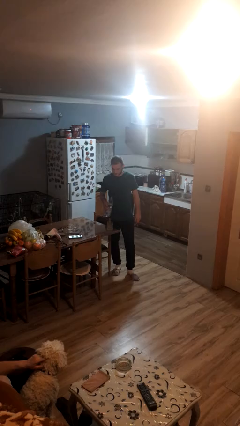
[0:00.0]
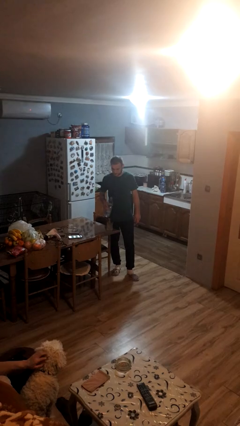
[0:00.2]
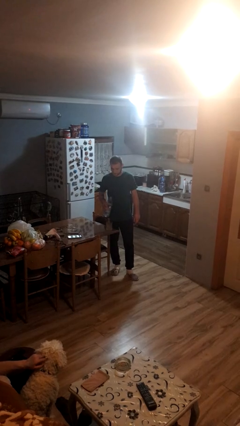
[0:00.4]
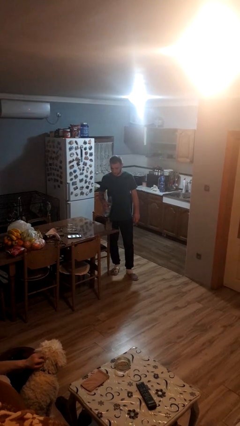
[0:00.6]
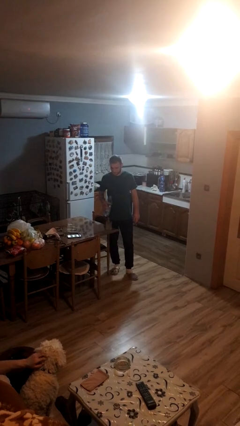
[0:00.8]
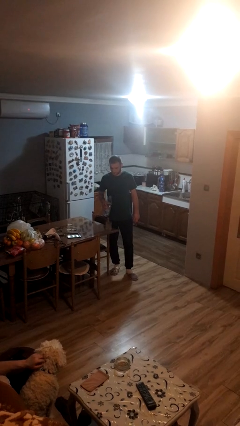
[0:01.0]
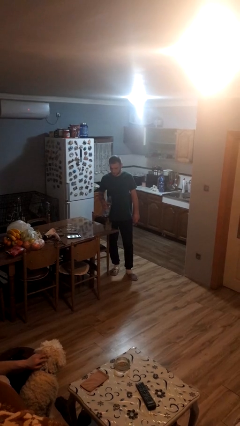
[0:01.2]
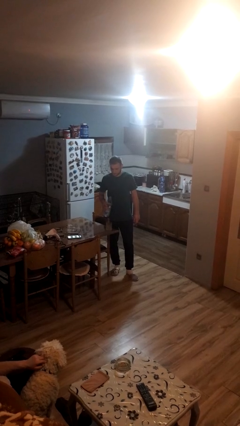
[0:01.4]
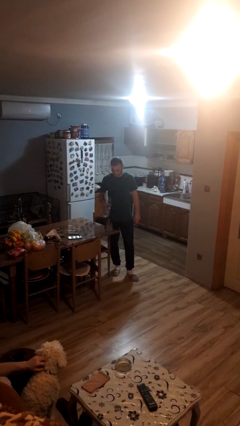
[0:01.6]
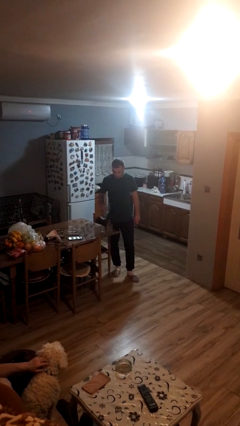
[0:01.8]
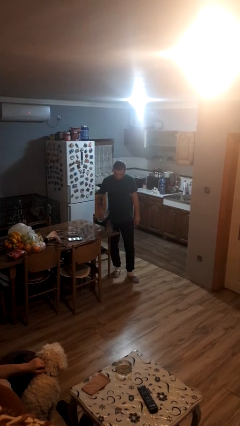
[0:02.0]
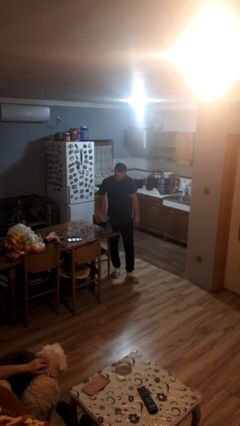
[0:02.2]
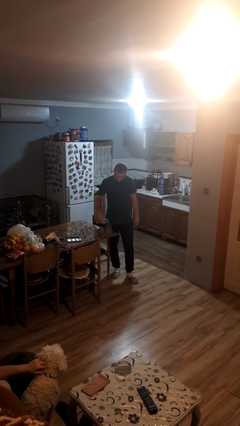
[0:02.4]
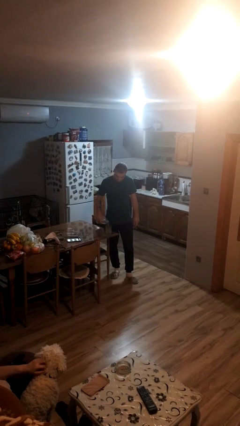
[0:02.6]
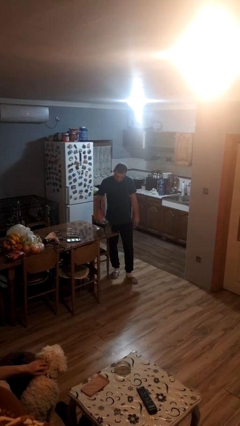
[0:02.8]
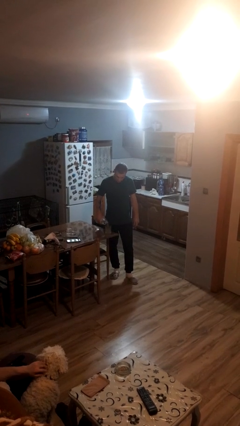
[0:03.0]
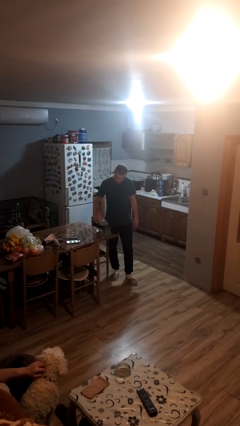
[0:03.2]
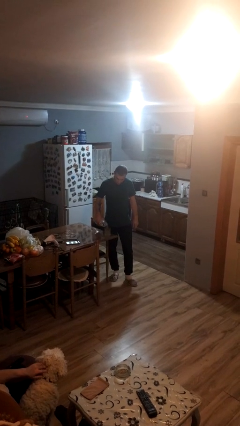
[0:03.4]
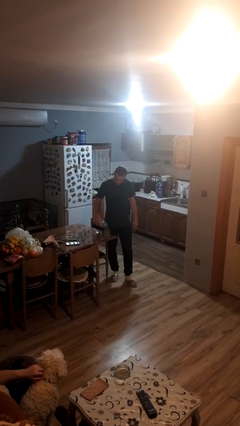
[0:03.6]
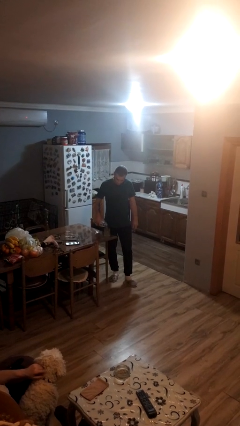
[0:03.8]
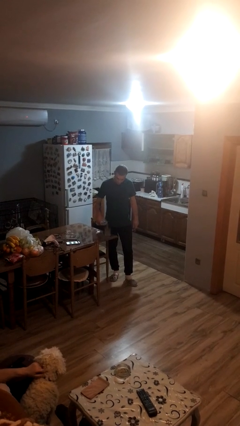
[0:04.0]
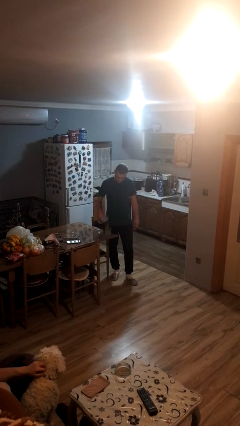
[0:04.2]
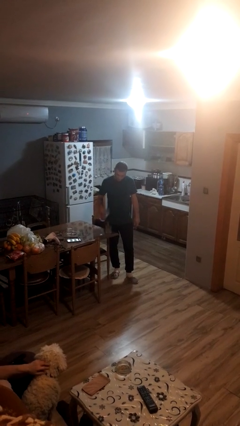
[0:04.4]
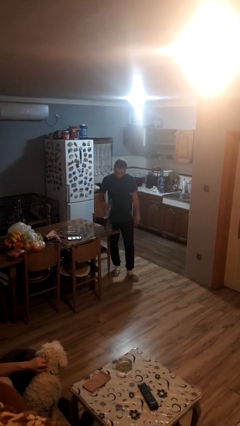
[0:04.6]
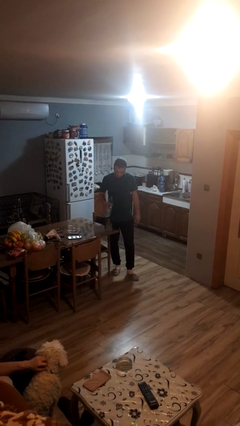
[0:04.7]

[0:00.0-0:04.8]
person pours liquid into cup

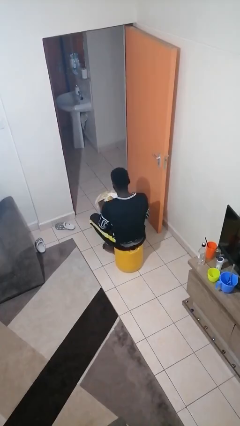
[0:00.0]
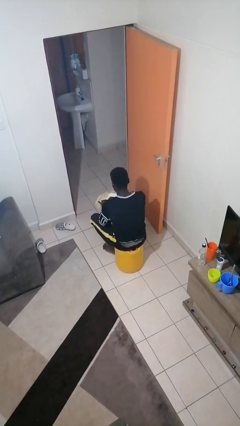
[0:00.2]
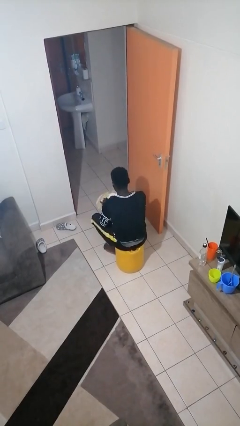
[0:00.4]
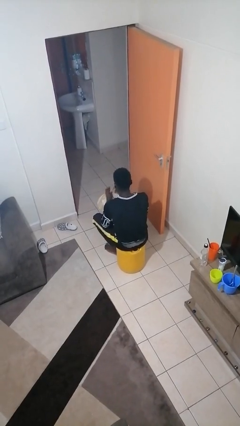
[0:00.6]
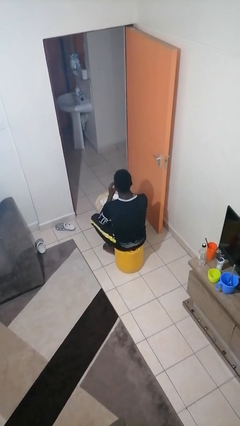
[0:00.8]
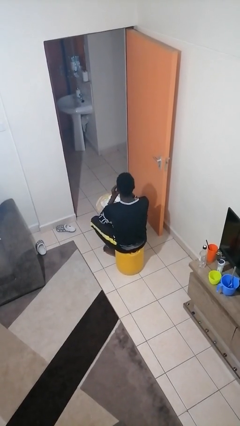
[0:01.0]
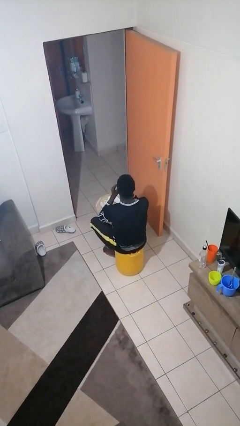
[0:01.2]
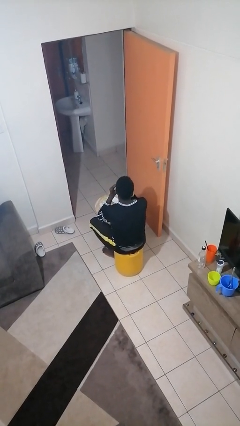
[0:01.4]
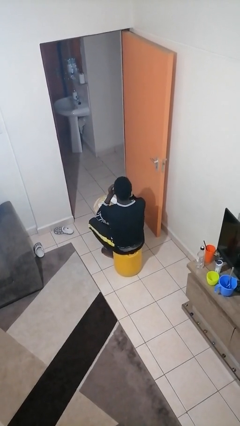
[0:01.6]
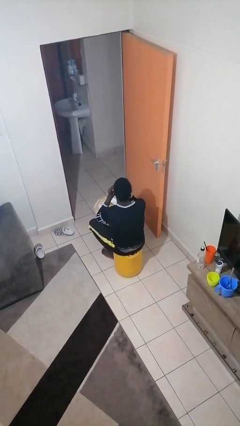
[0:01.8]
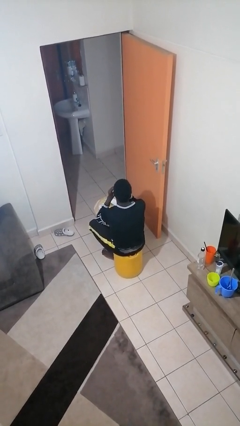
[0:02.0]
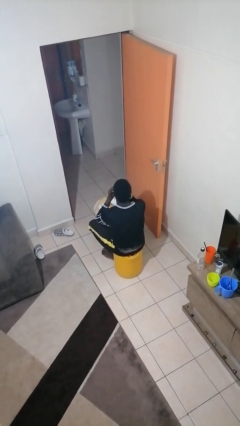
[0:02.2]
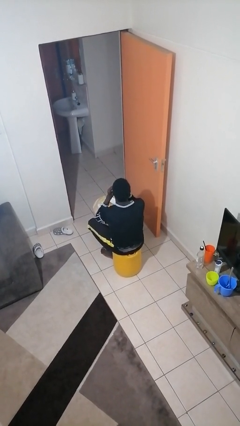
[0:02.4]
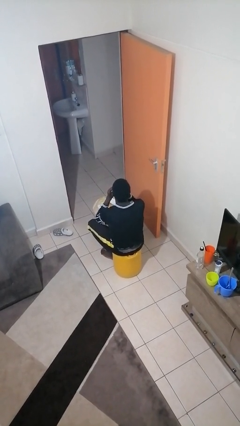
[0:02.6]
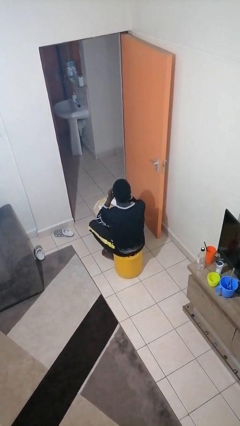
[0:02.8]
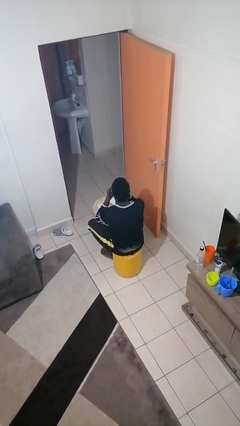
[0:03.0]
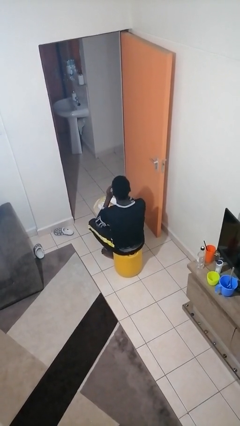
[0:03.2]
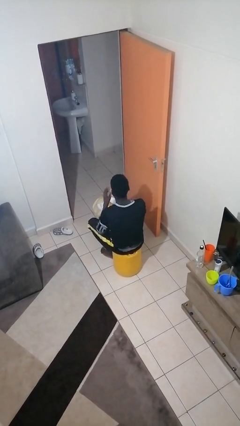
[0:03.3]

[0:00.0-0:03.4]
person eats with hands

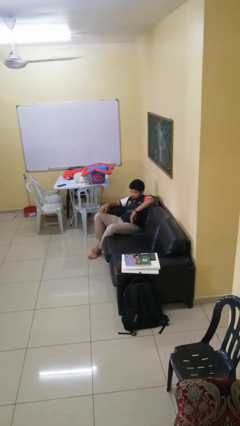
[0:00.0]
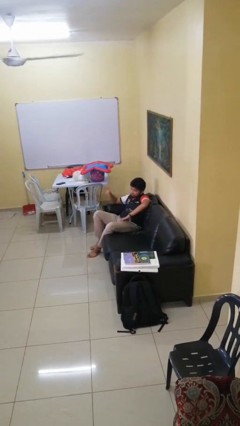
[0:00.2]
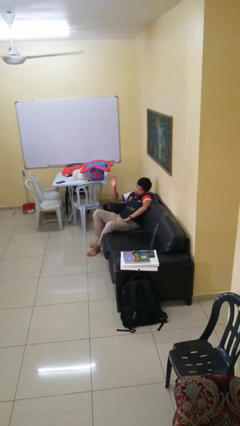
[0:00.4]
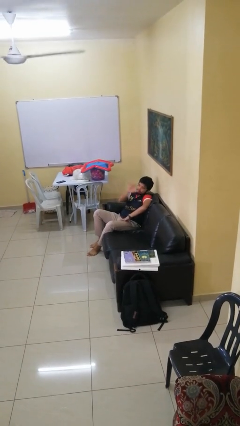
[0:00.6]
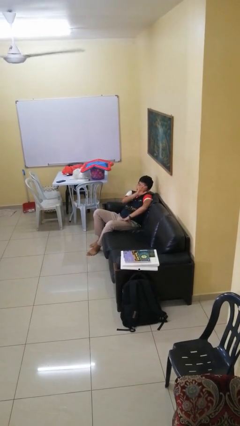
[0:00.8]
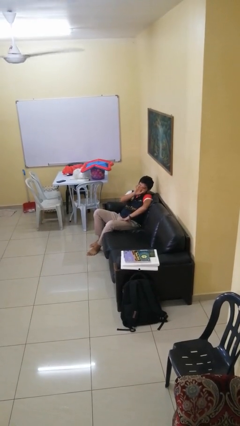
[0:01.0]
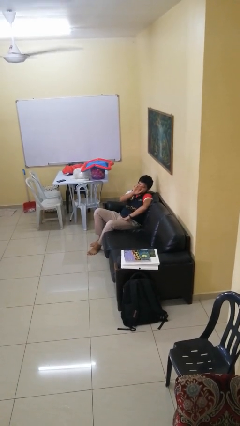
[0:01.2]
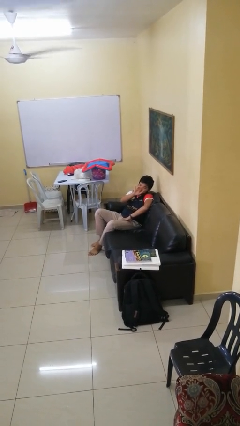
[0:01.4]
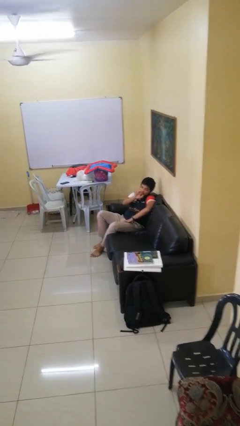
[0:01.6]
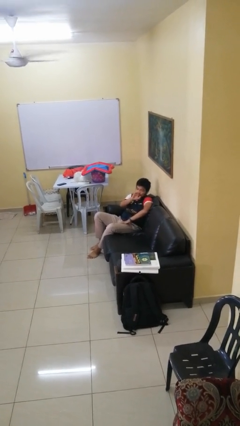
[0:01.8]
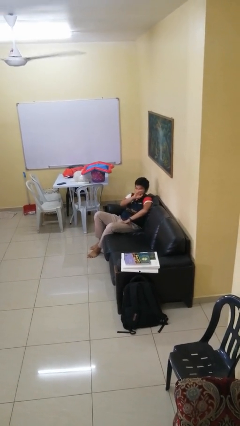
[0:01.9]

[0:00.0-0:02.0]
person gestures swipe left

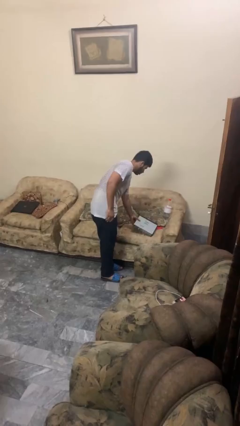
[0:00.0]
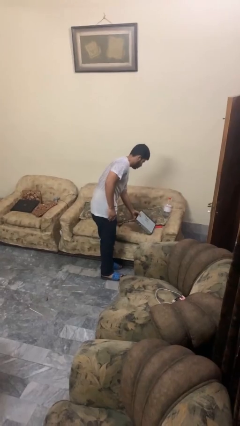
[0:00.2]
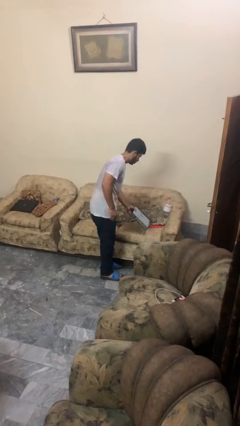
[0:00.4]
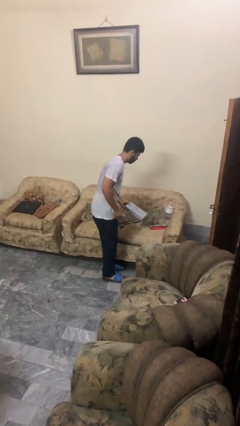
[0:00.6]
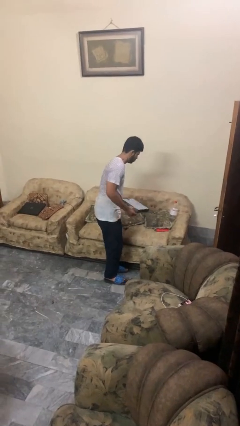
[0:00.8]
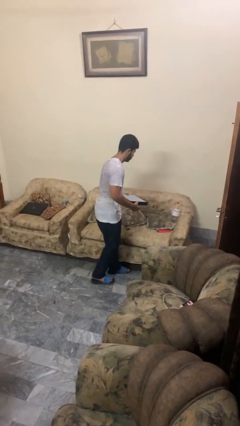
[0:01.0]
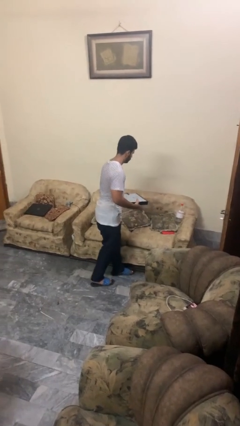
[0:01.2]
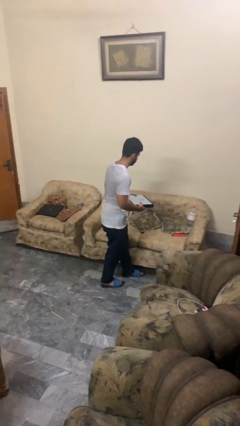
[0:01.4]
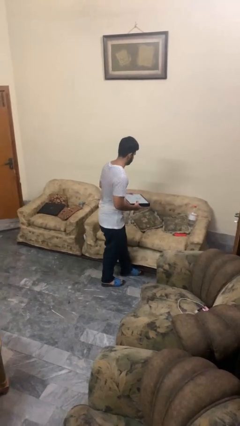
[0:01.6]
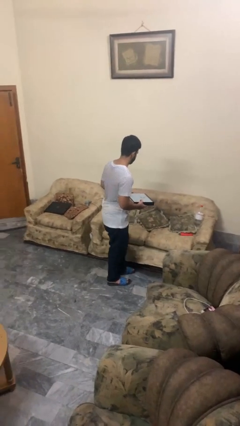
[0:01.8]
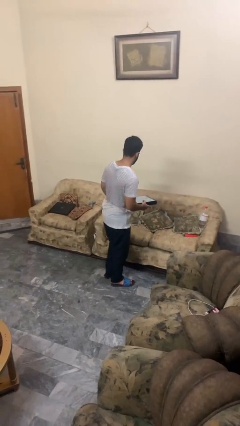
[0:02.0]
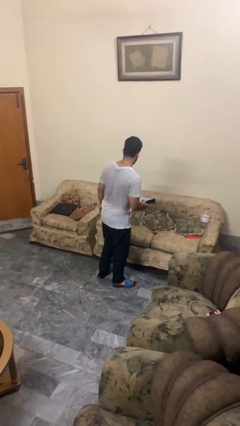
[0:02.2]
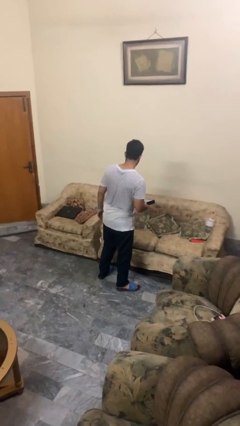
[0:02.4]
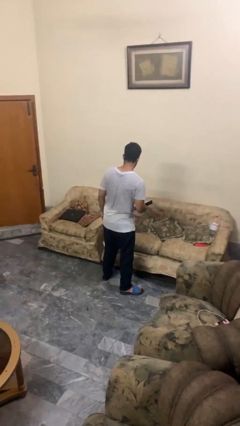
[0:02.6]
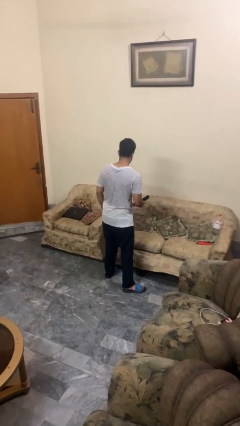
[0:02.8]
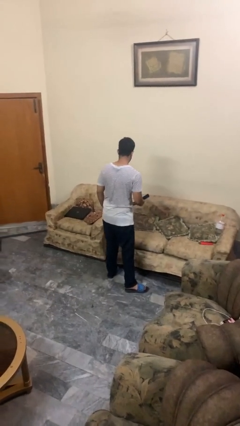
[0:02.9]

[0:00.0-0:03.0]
person picks up object from couch

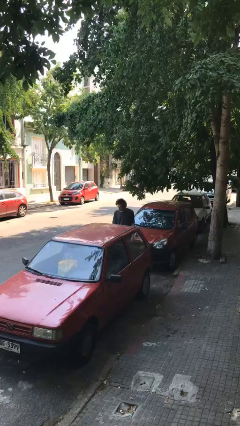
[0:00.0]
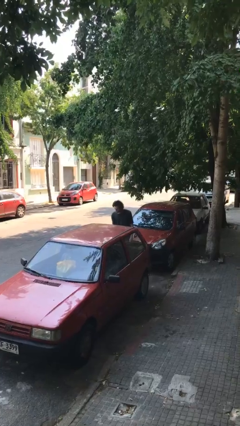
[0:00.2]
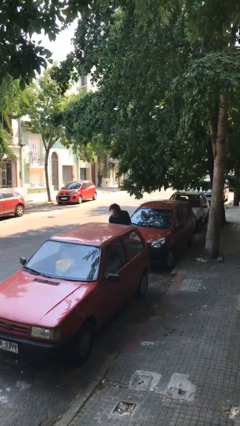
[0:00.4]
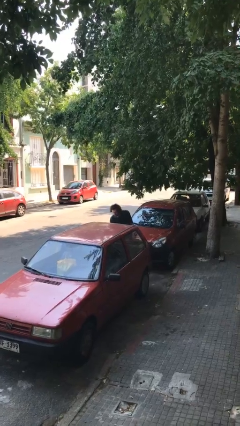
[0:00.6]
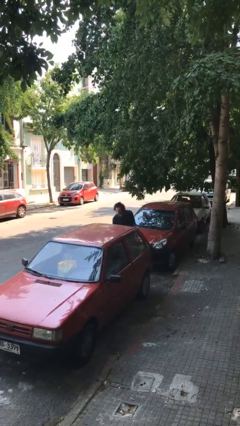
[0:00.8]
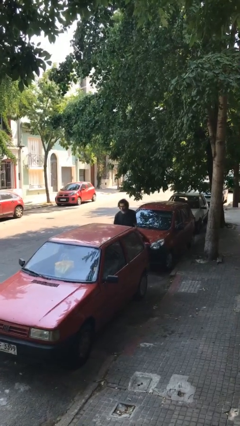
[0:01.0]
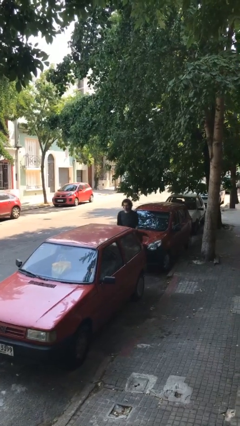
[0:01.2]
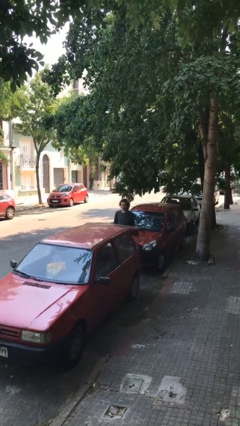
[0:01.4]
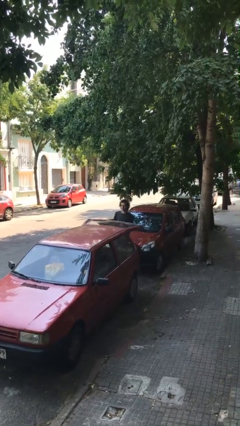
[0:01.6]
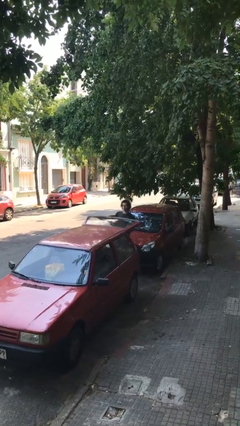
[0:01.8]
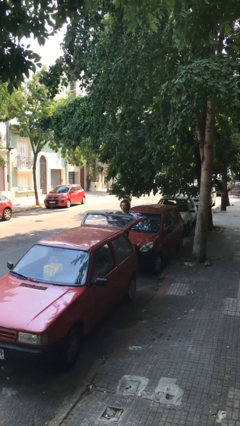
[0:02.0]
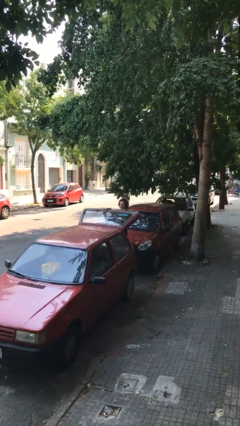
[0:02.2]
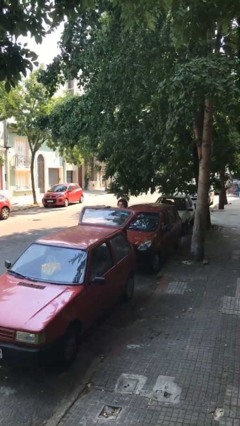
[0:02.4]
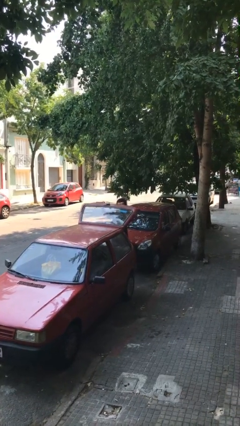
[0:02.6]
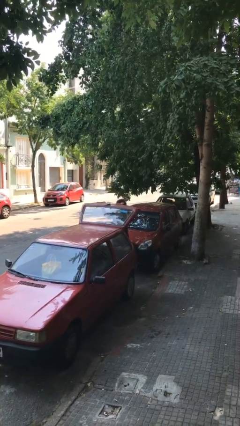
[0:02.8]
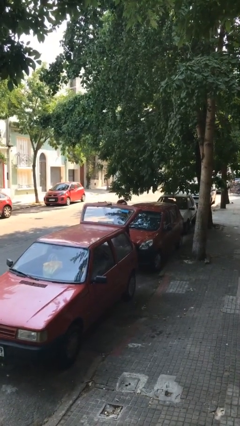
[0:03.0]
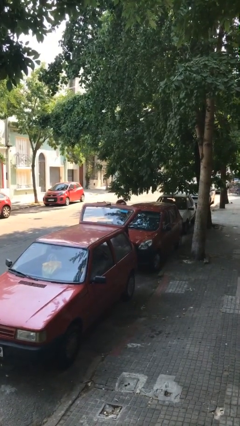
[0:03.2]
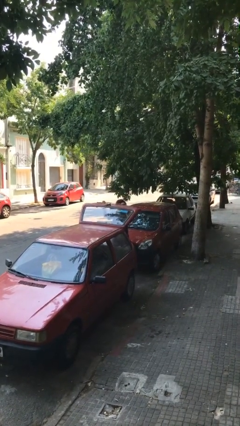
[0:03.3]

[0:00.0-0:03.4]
person opens car trunk

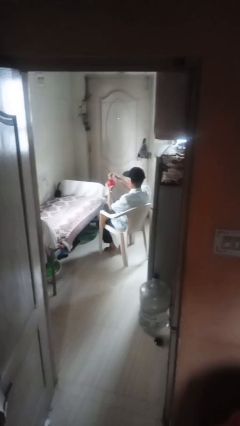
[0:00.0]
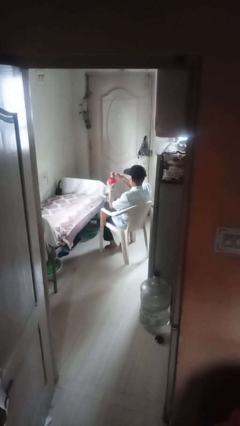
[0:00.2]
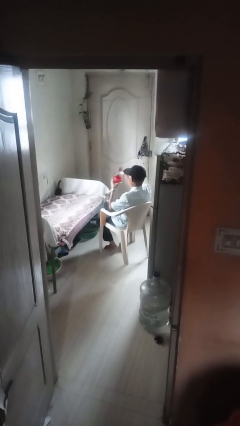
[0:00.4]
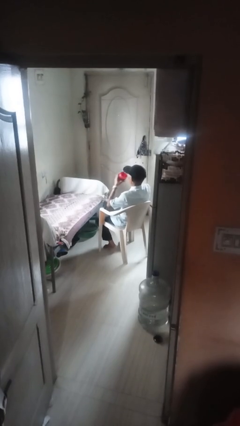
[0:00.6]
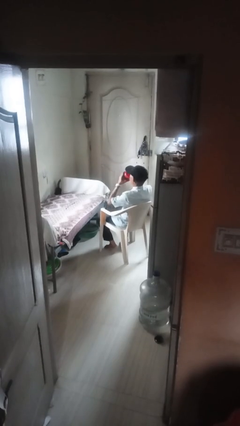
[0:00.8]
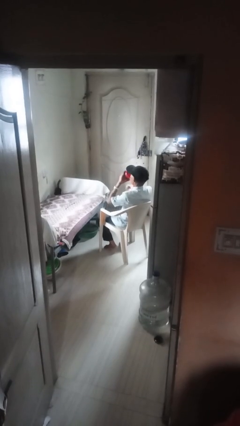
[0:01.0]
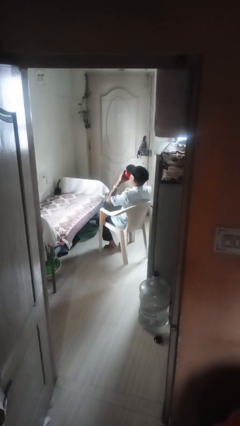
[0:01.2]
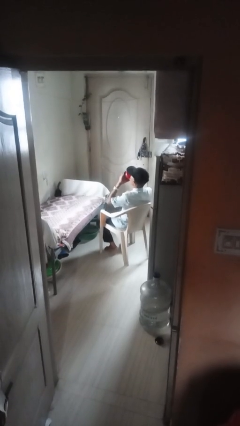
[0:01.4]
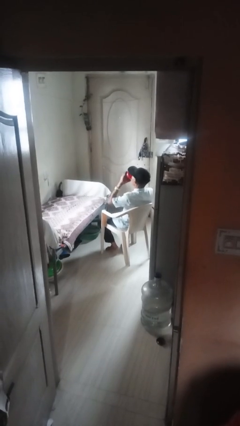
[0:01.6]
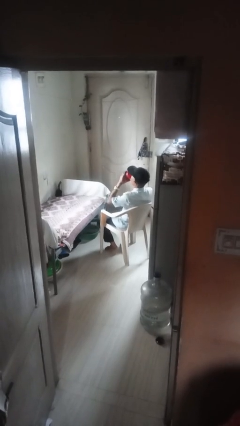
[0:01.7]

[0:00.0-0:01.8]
person drinks from mug
